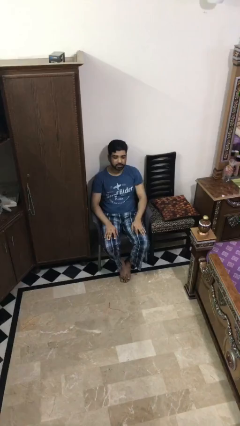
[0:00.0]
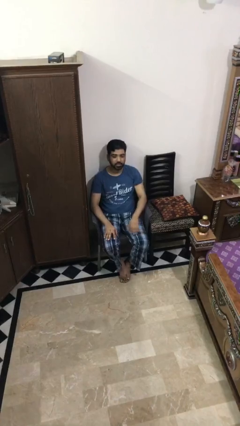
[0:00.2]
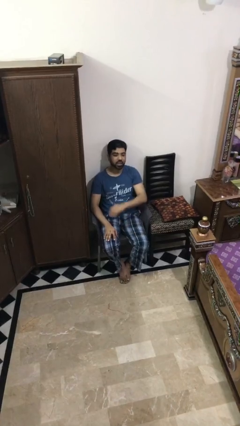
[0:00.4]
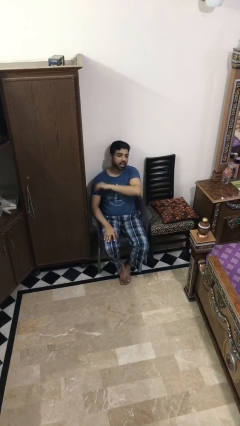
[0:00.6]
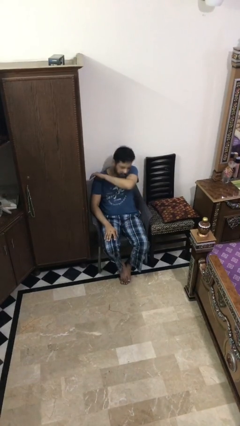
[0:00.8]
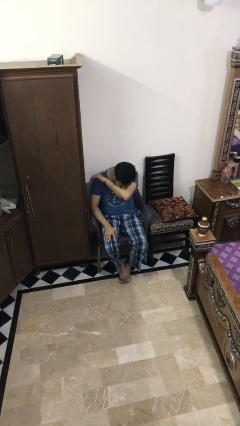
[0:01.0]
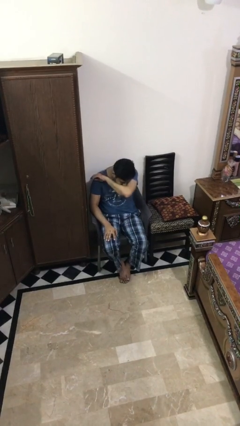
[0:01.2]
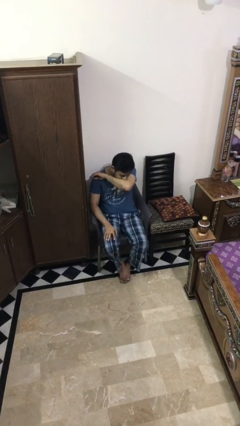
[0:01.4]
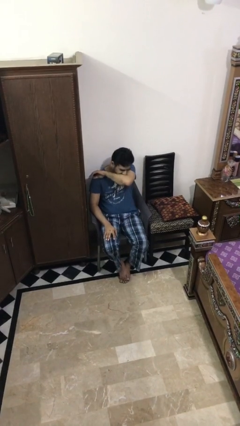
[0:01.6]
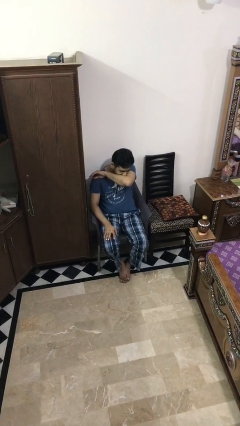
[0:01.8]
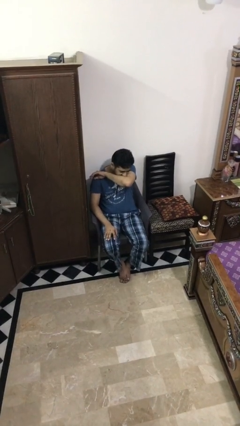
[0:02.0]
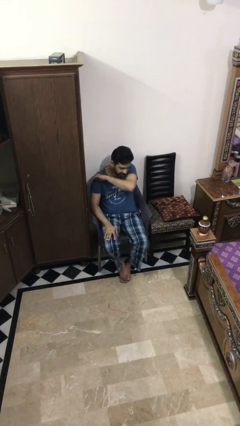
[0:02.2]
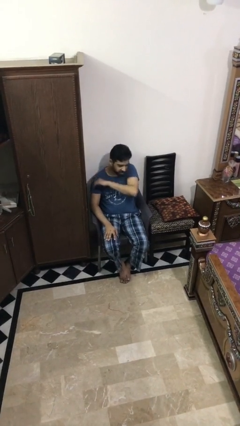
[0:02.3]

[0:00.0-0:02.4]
person sneezes into arm

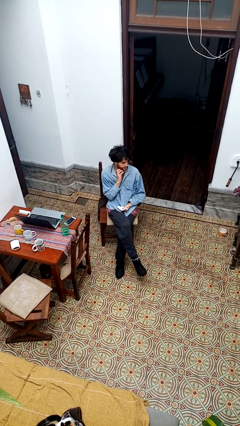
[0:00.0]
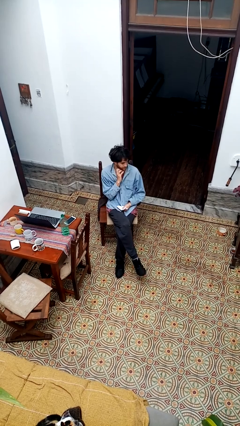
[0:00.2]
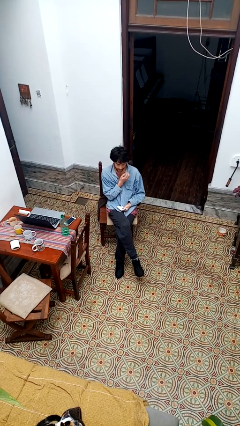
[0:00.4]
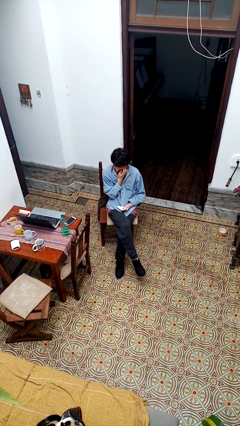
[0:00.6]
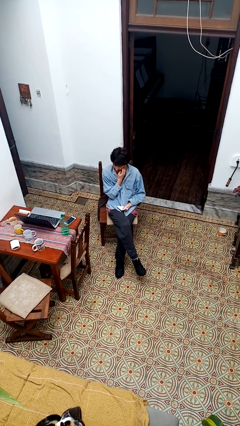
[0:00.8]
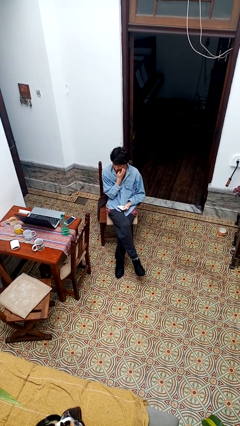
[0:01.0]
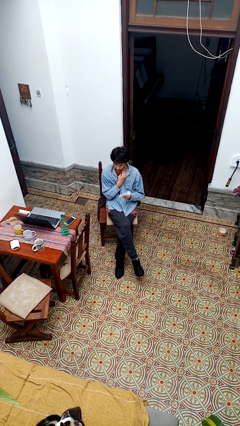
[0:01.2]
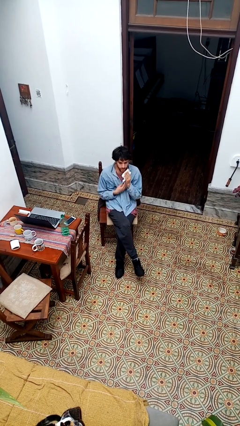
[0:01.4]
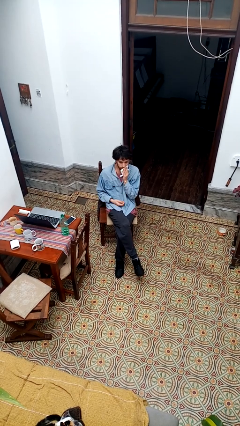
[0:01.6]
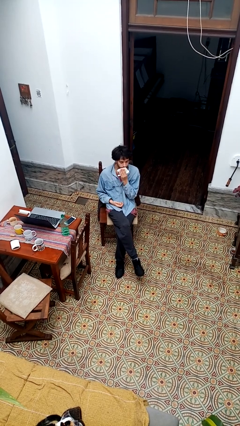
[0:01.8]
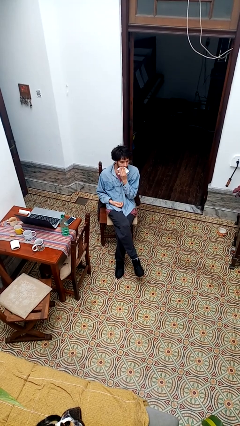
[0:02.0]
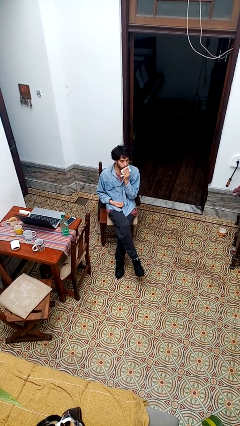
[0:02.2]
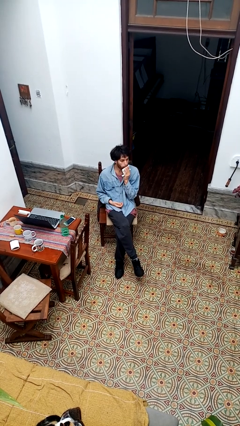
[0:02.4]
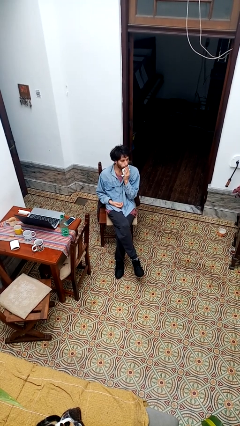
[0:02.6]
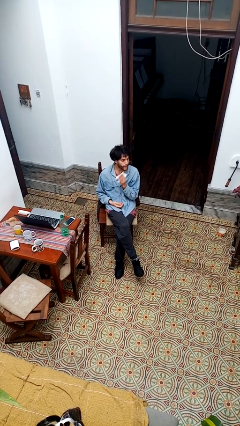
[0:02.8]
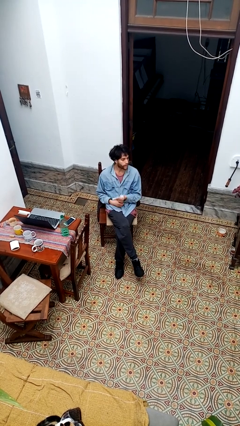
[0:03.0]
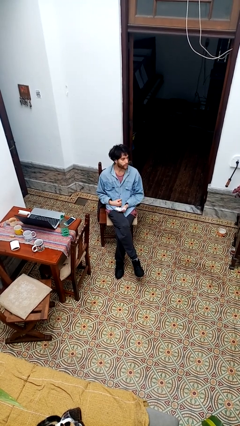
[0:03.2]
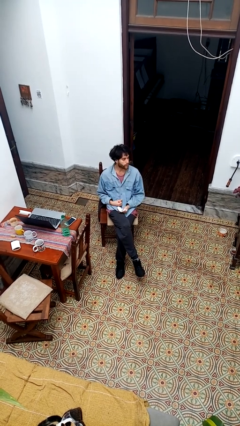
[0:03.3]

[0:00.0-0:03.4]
person wipes mouth with napkin

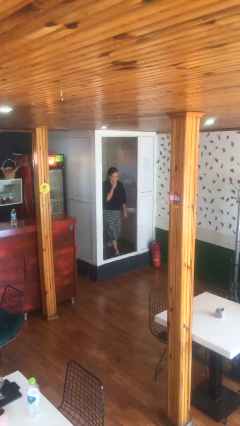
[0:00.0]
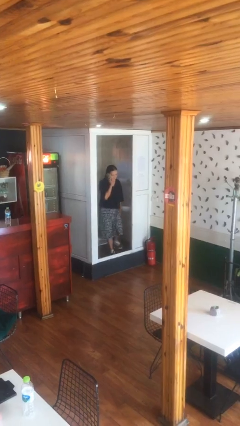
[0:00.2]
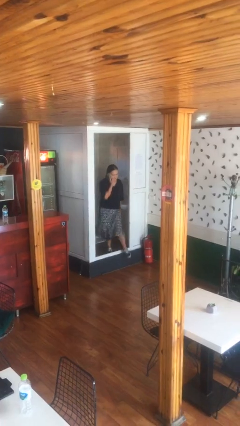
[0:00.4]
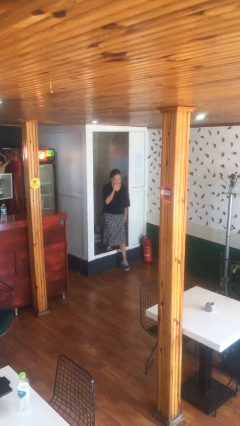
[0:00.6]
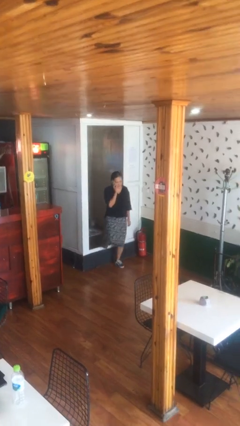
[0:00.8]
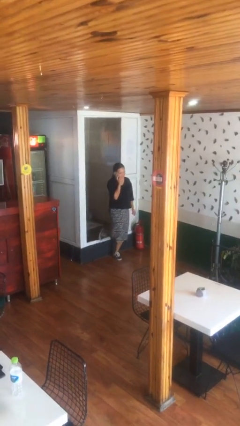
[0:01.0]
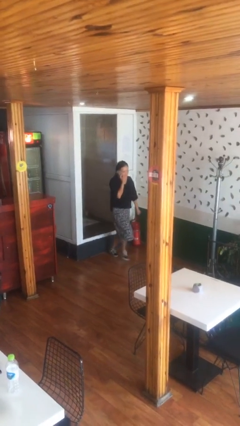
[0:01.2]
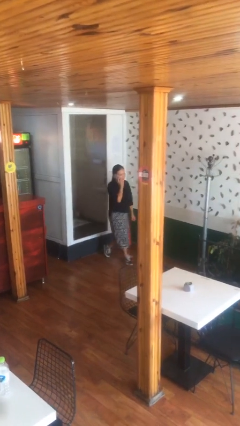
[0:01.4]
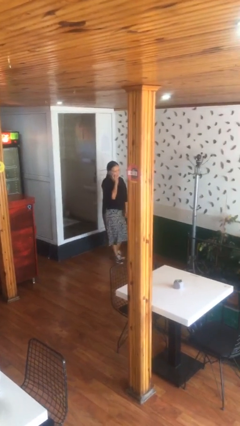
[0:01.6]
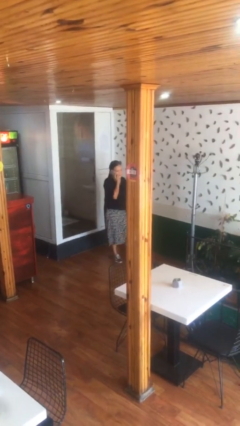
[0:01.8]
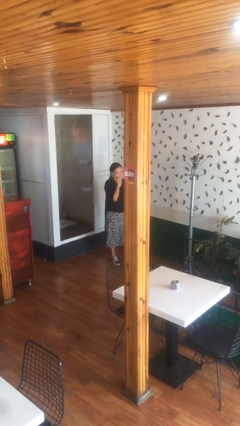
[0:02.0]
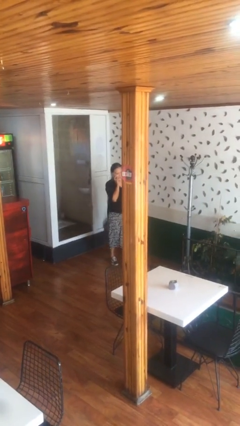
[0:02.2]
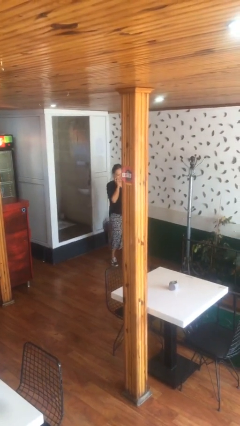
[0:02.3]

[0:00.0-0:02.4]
person enters scene through structure

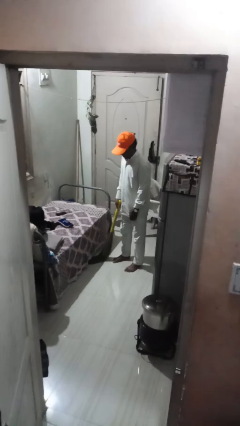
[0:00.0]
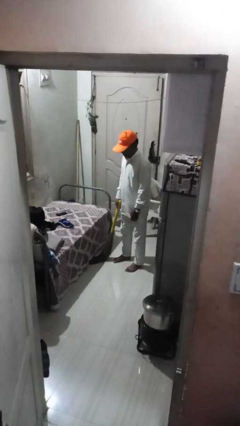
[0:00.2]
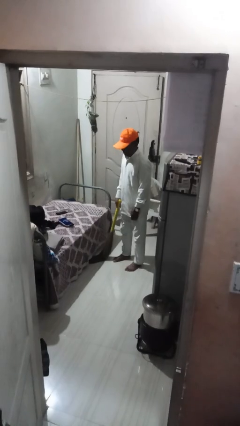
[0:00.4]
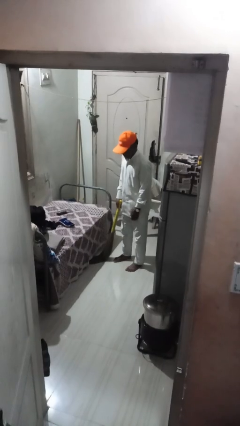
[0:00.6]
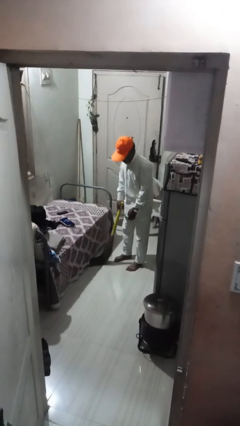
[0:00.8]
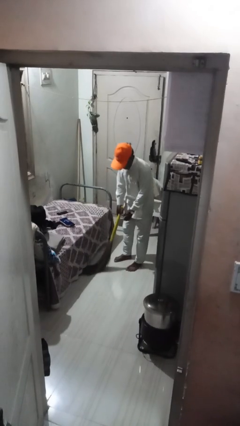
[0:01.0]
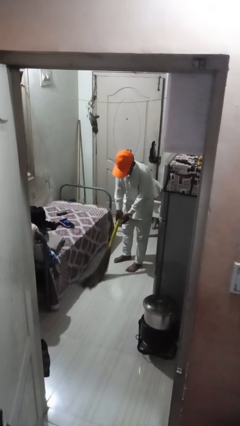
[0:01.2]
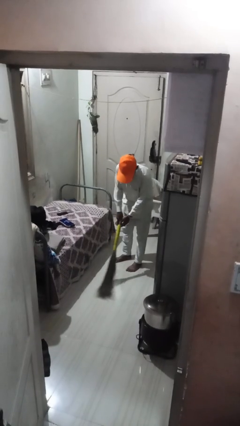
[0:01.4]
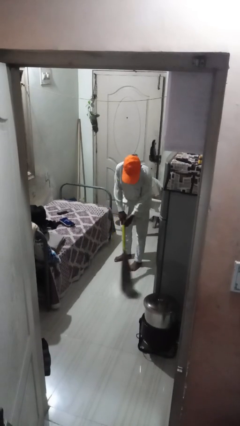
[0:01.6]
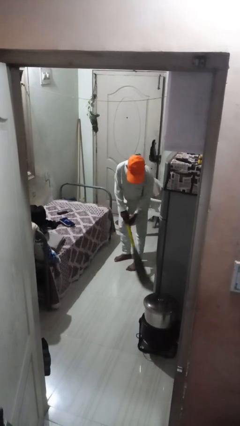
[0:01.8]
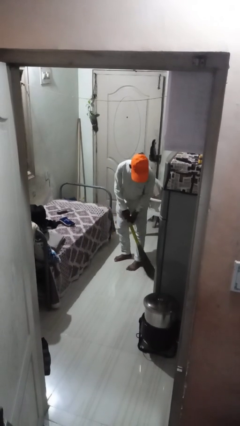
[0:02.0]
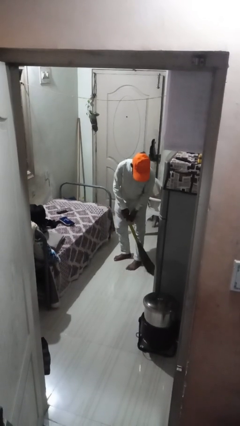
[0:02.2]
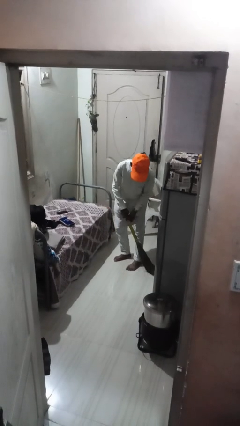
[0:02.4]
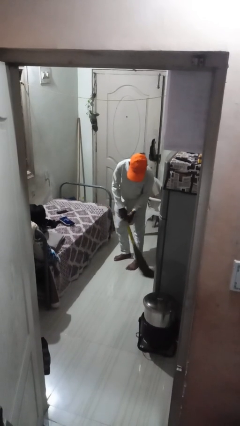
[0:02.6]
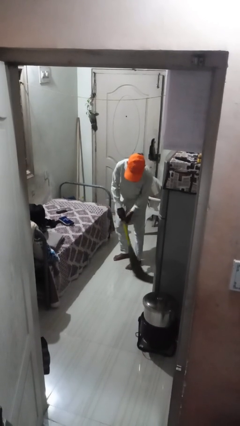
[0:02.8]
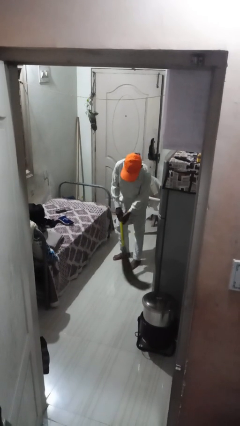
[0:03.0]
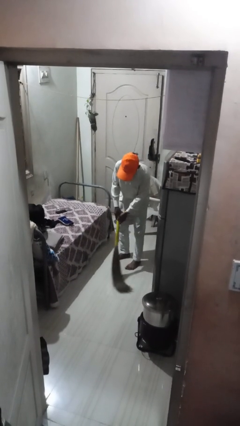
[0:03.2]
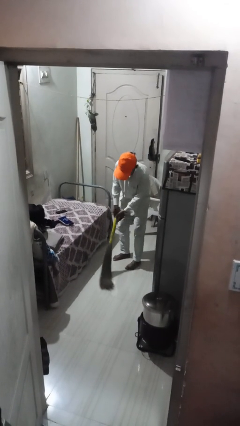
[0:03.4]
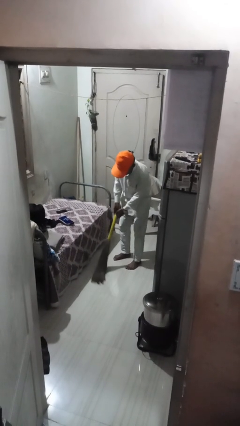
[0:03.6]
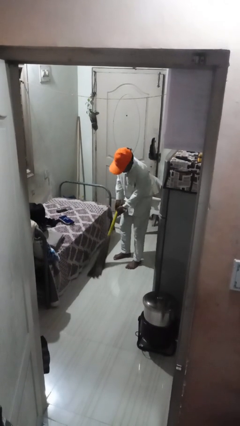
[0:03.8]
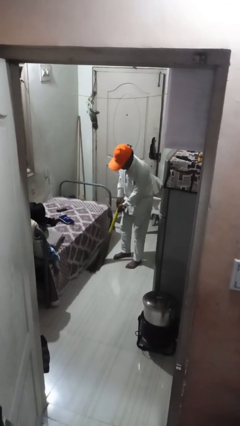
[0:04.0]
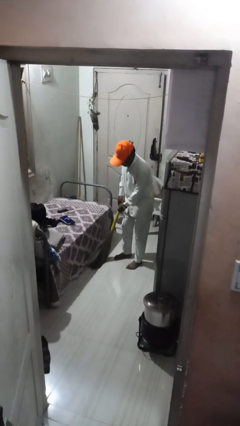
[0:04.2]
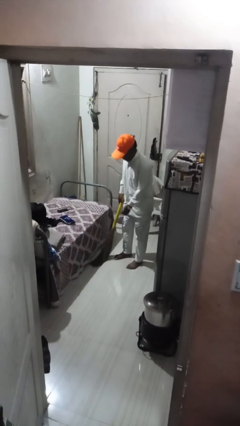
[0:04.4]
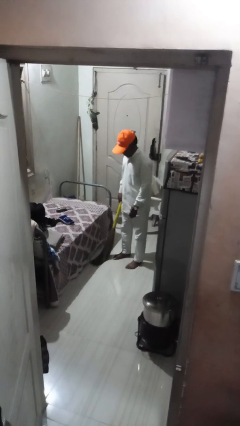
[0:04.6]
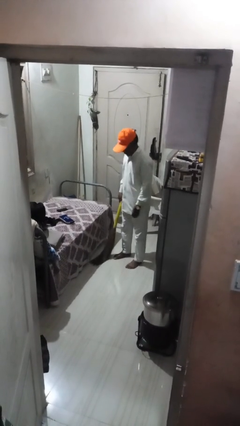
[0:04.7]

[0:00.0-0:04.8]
person sweeps floor

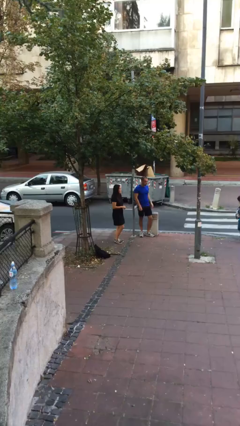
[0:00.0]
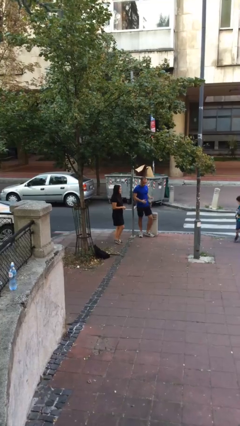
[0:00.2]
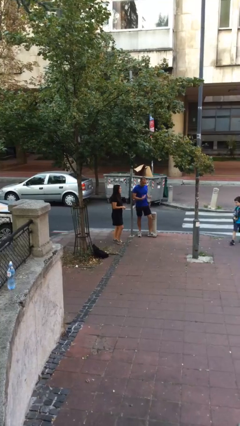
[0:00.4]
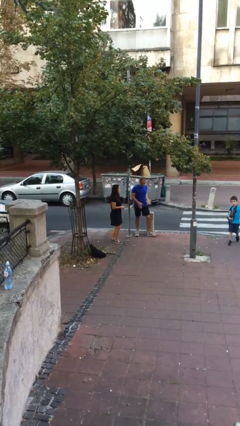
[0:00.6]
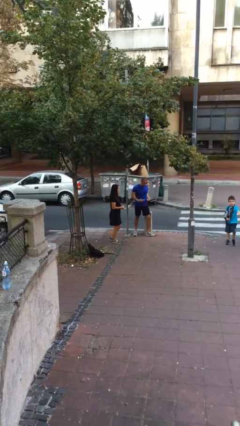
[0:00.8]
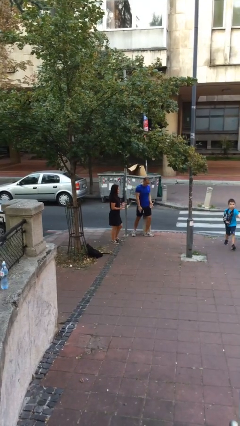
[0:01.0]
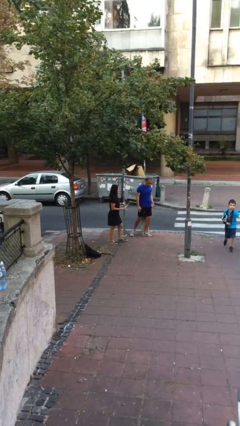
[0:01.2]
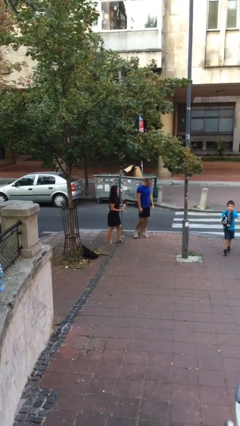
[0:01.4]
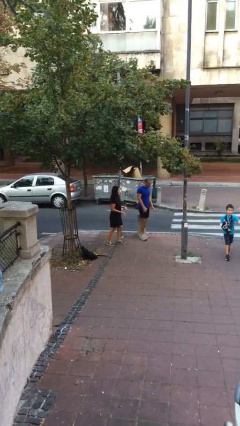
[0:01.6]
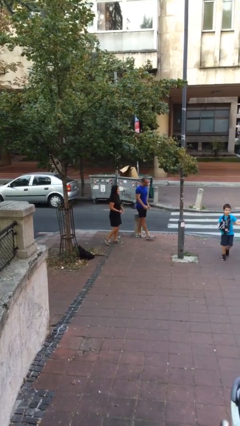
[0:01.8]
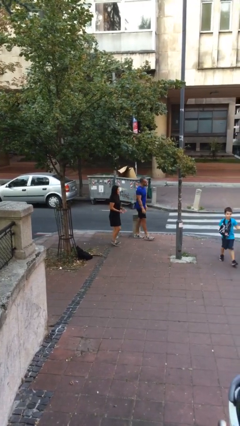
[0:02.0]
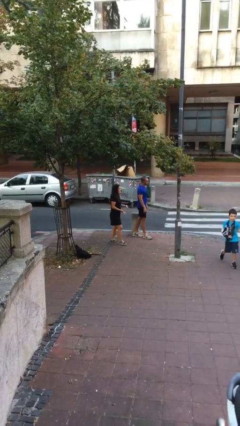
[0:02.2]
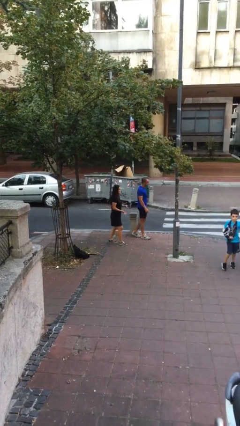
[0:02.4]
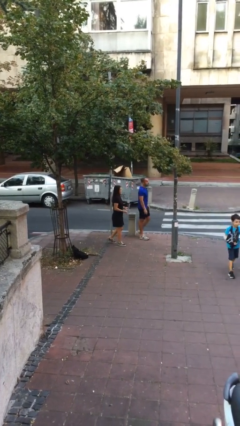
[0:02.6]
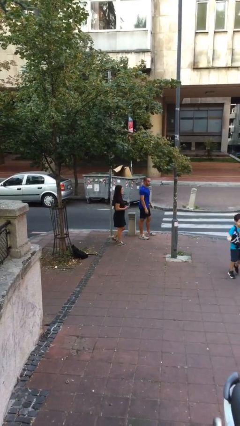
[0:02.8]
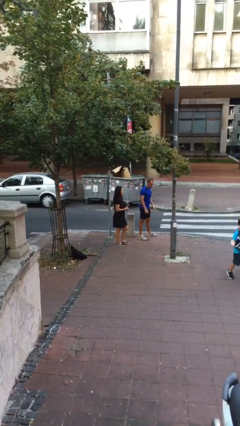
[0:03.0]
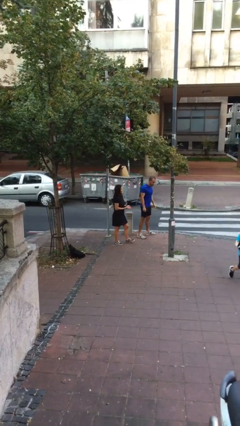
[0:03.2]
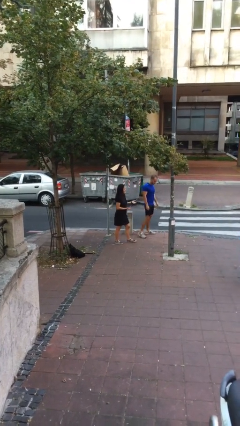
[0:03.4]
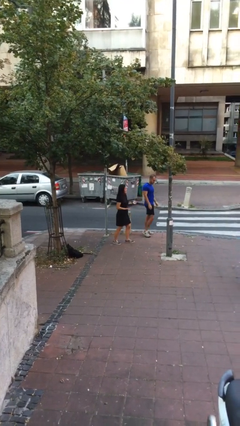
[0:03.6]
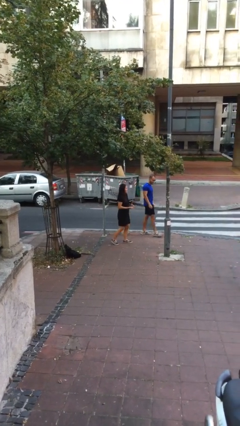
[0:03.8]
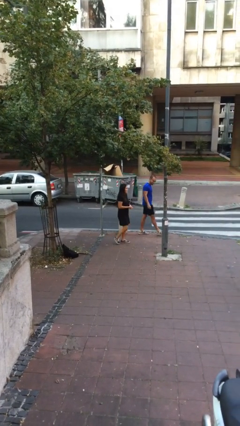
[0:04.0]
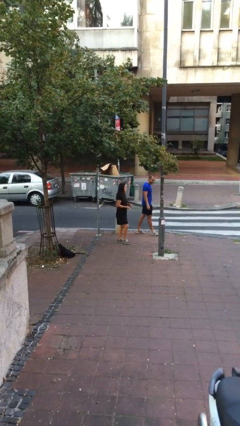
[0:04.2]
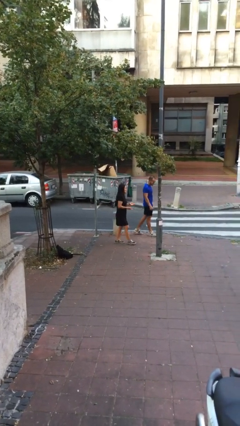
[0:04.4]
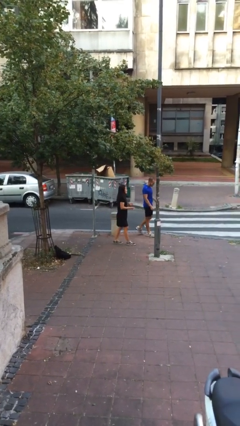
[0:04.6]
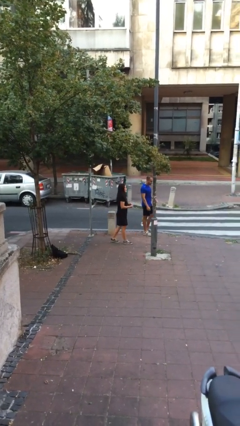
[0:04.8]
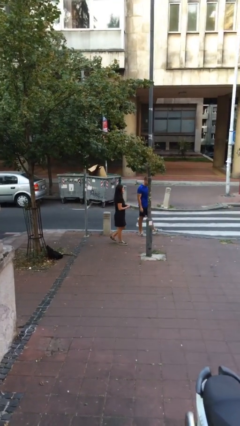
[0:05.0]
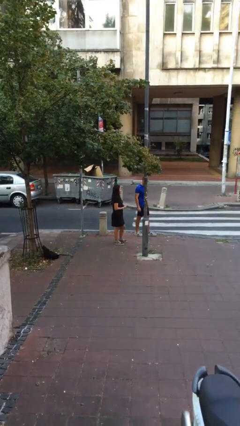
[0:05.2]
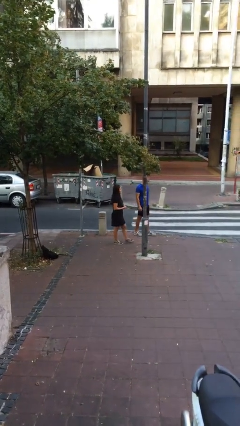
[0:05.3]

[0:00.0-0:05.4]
person talks to person
